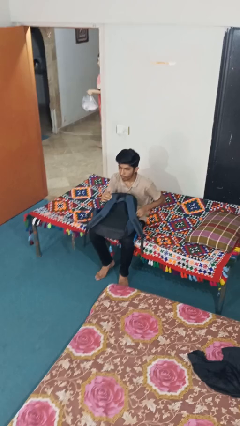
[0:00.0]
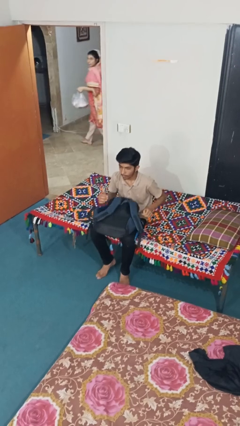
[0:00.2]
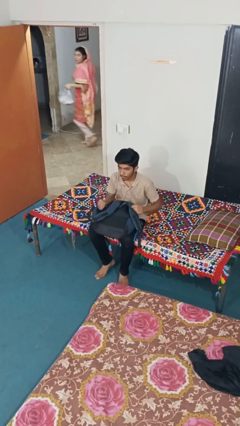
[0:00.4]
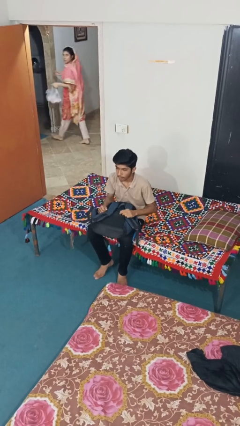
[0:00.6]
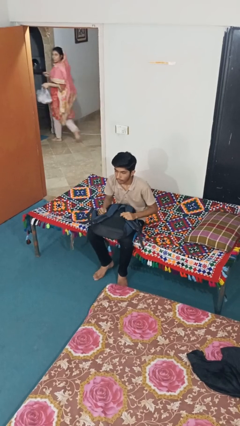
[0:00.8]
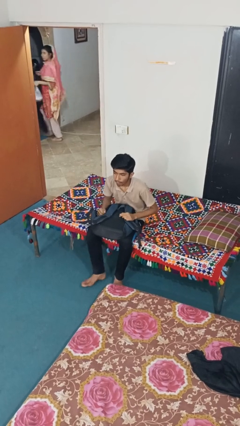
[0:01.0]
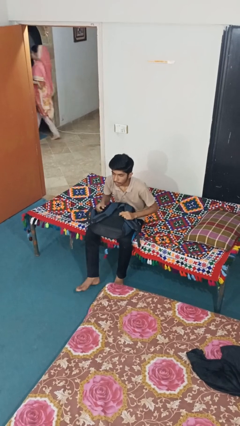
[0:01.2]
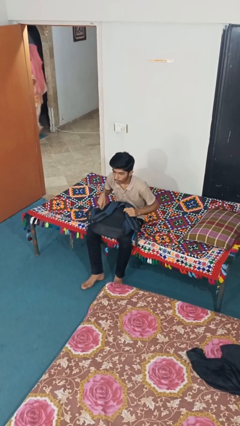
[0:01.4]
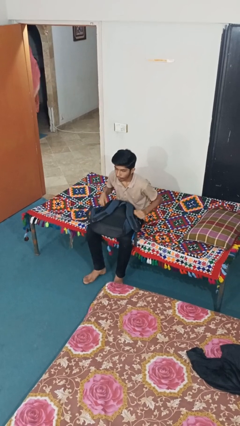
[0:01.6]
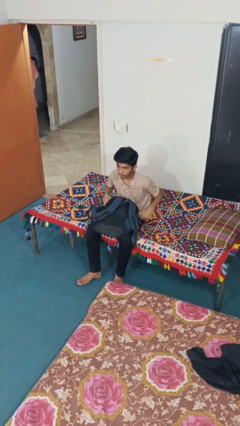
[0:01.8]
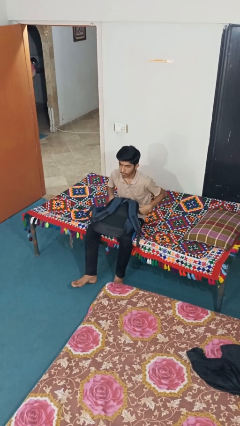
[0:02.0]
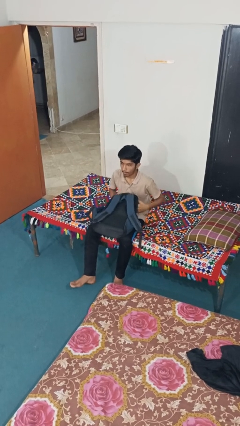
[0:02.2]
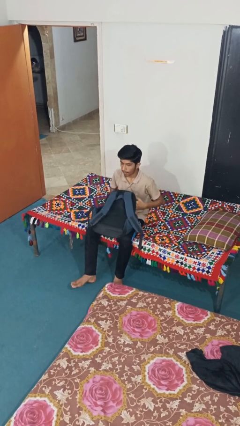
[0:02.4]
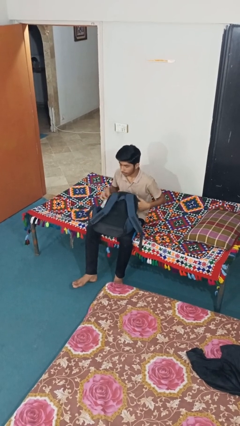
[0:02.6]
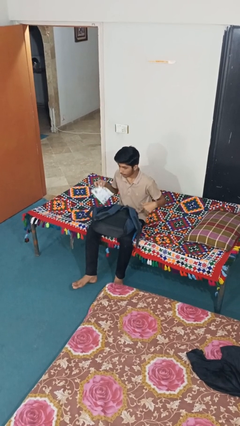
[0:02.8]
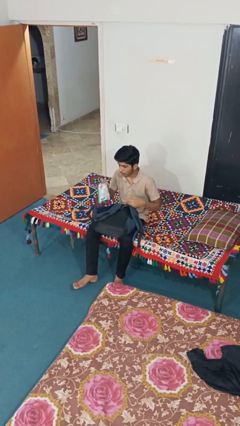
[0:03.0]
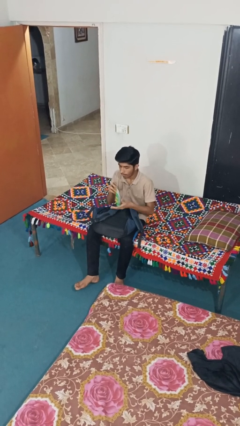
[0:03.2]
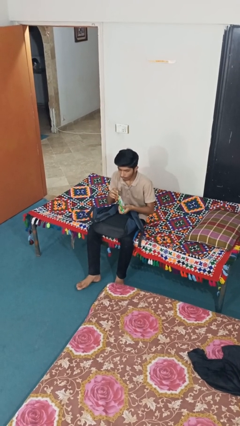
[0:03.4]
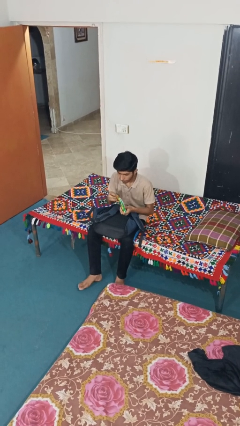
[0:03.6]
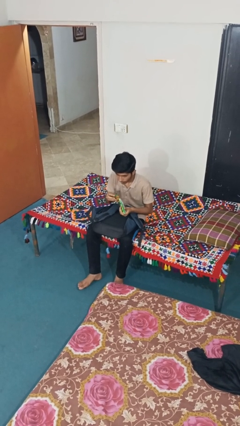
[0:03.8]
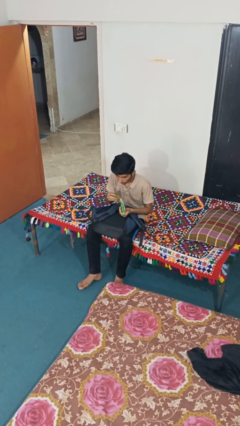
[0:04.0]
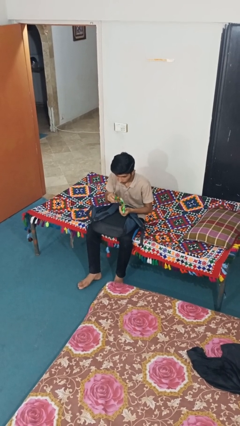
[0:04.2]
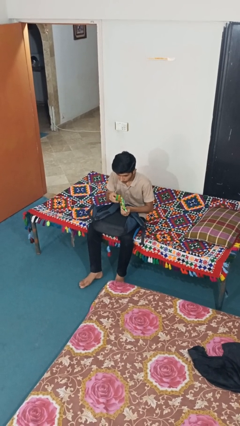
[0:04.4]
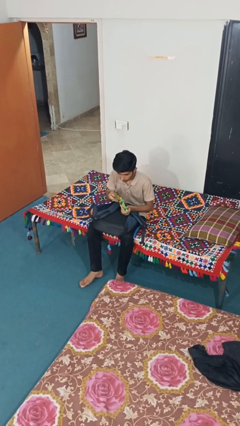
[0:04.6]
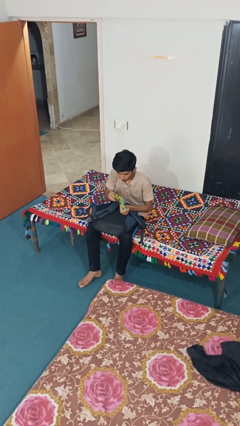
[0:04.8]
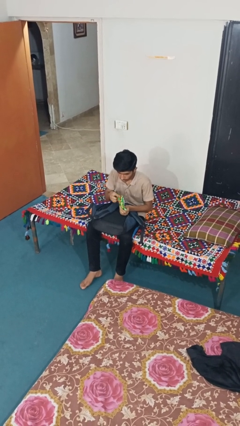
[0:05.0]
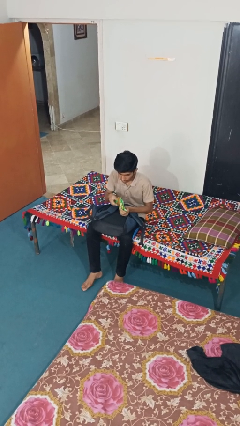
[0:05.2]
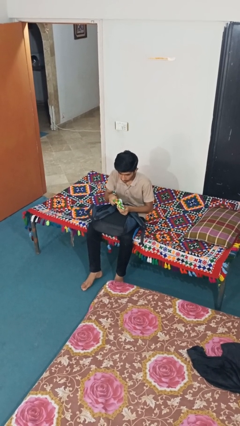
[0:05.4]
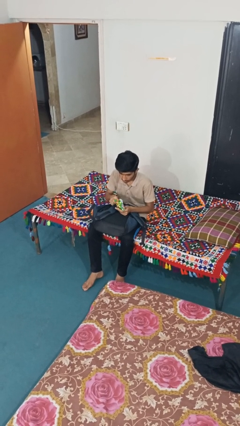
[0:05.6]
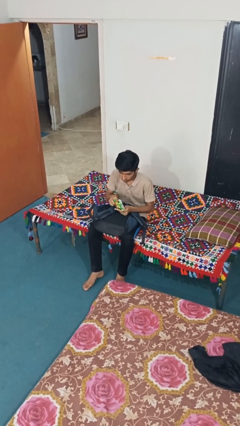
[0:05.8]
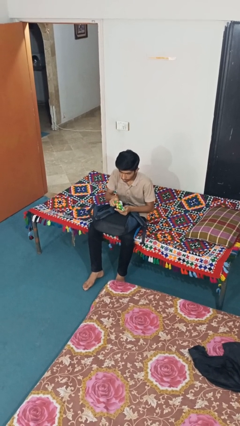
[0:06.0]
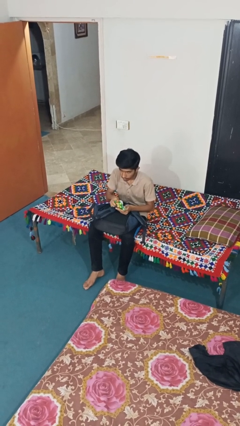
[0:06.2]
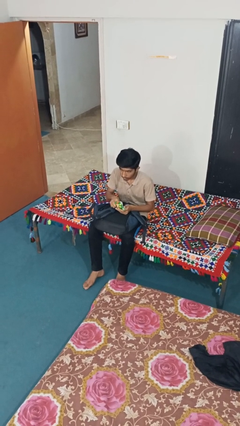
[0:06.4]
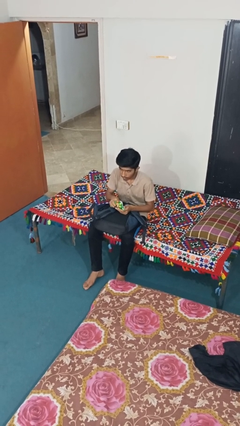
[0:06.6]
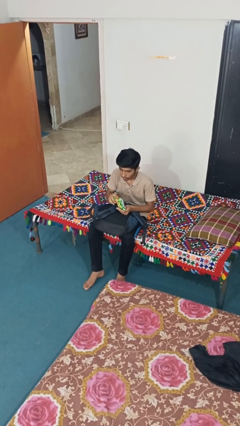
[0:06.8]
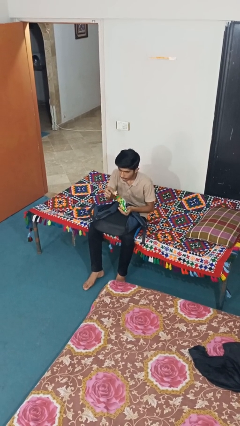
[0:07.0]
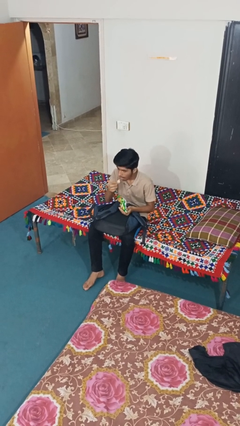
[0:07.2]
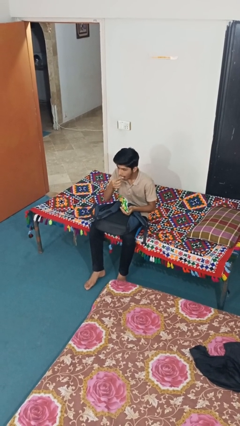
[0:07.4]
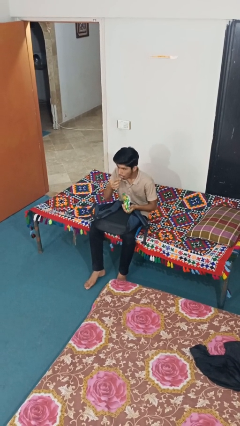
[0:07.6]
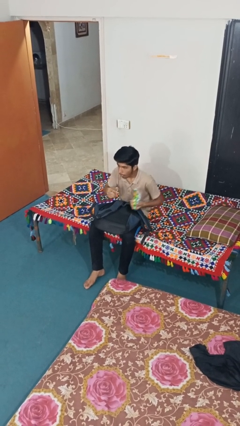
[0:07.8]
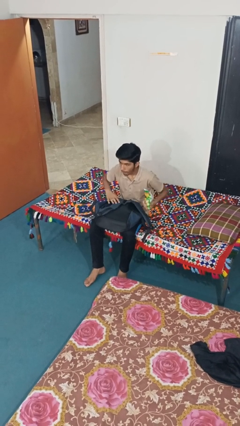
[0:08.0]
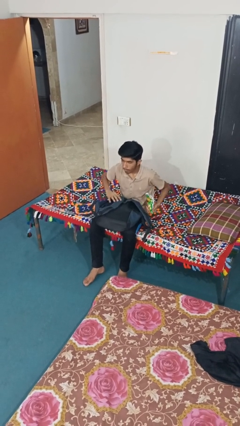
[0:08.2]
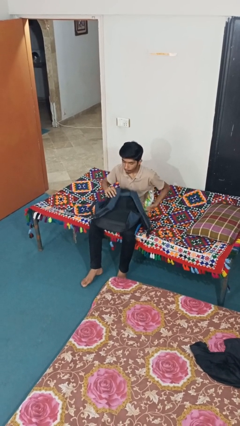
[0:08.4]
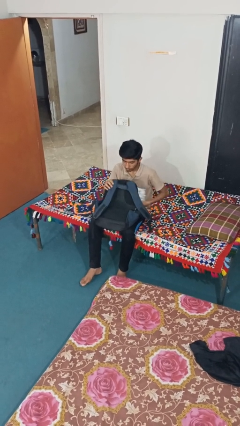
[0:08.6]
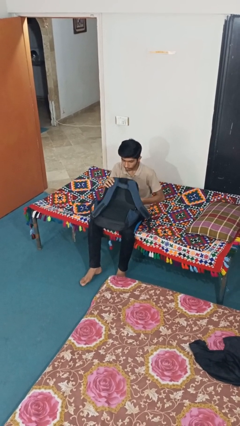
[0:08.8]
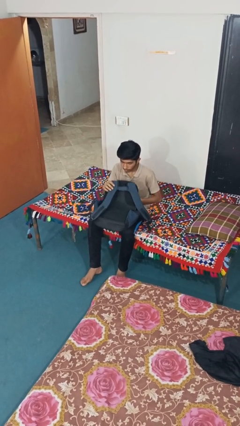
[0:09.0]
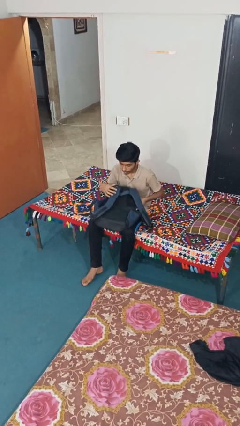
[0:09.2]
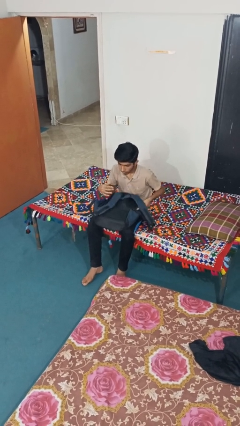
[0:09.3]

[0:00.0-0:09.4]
person eats snack from bag

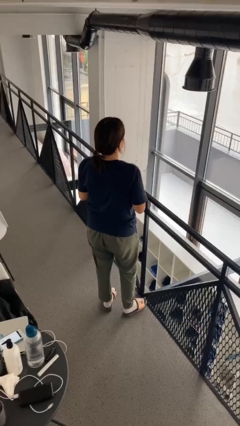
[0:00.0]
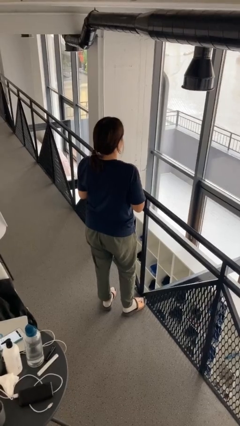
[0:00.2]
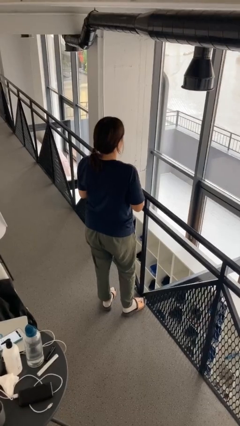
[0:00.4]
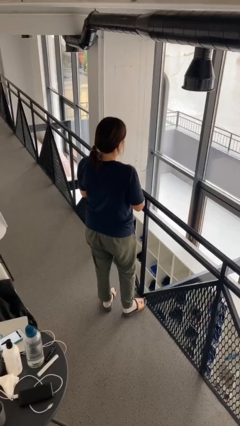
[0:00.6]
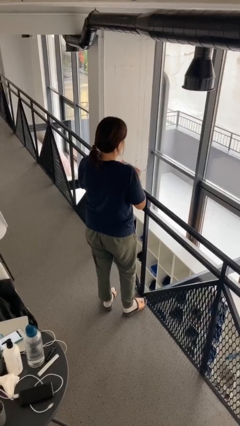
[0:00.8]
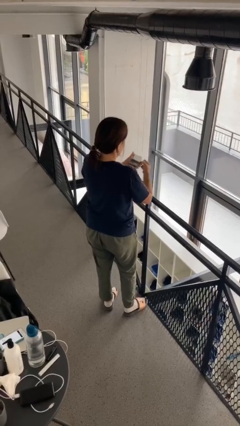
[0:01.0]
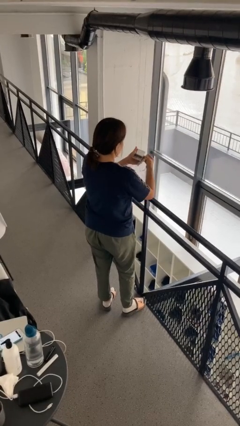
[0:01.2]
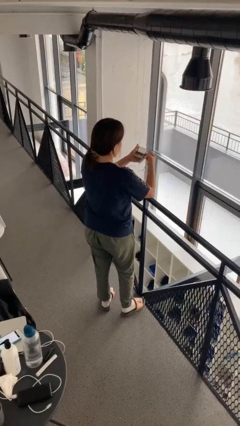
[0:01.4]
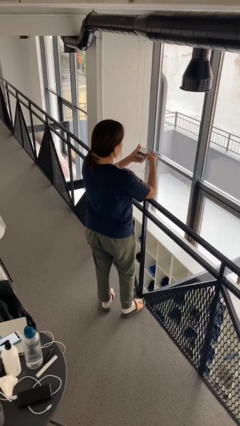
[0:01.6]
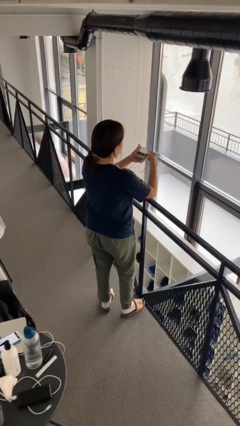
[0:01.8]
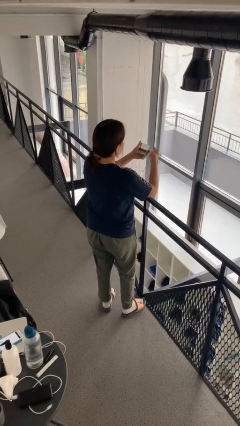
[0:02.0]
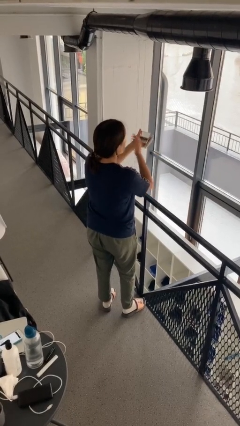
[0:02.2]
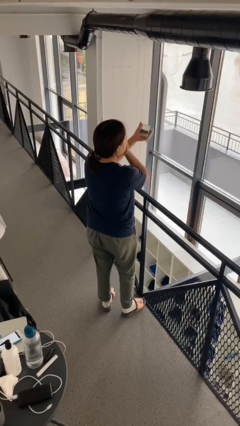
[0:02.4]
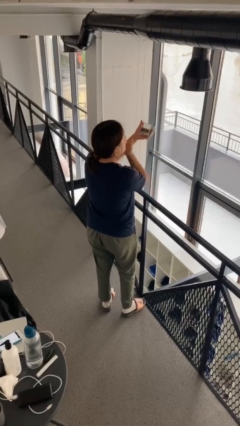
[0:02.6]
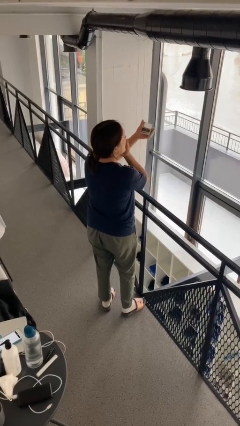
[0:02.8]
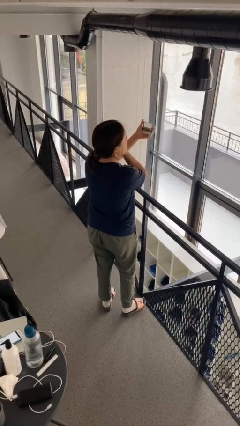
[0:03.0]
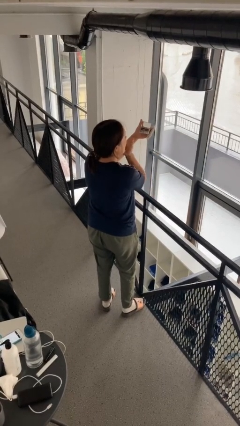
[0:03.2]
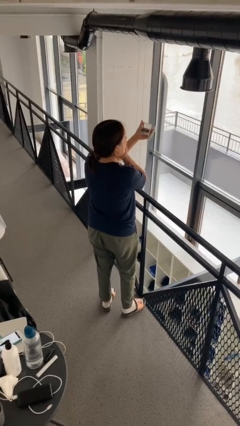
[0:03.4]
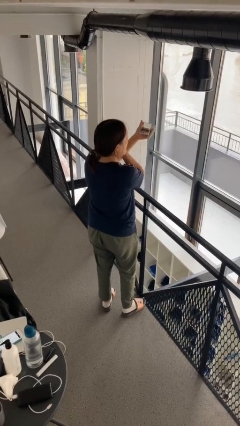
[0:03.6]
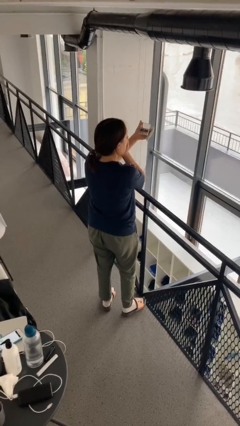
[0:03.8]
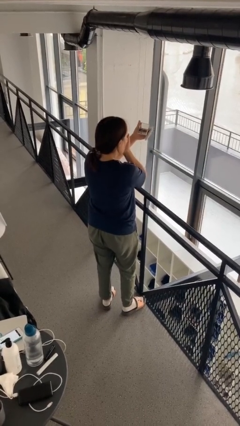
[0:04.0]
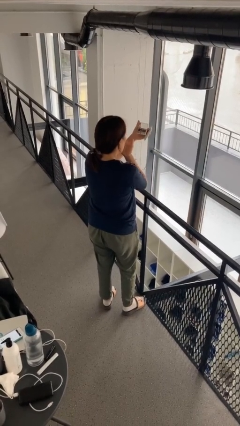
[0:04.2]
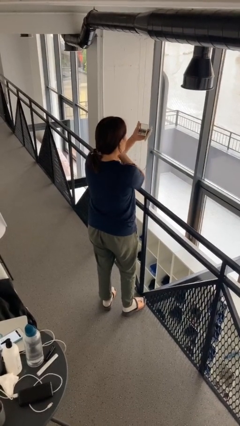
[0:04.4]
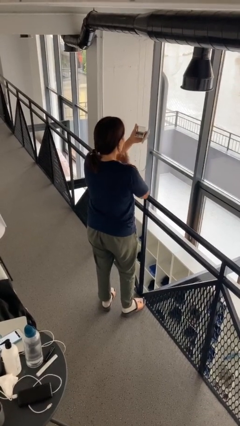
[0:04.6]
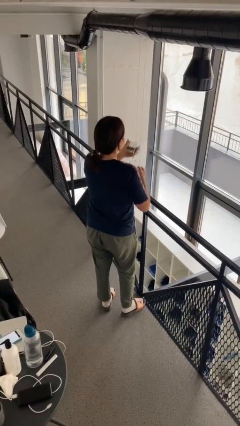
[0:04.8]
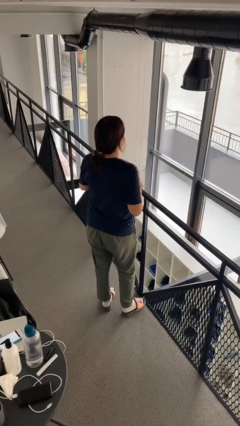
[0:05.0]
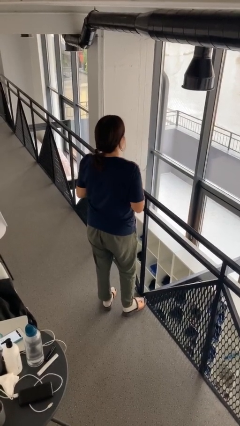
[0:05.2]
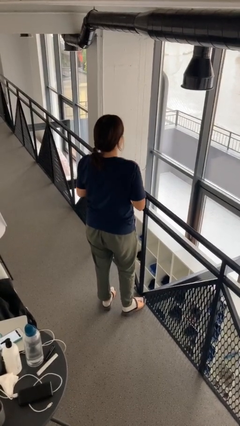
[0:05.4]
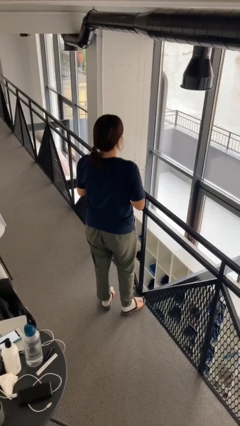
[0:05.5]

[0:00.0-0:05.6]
person applies foundation makeup

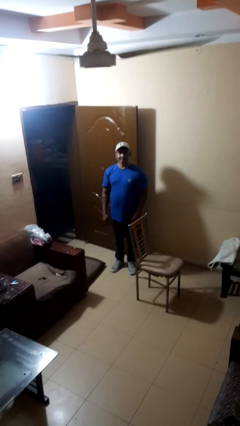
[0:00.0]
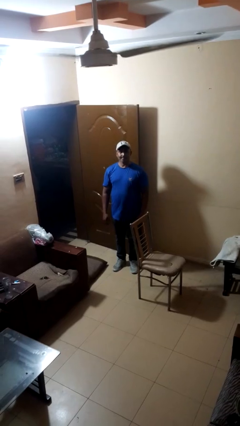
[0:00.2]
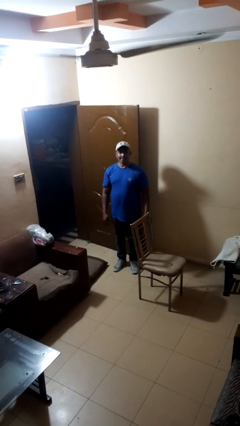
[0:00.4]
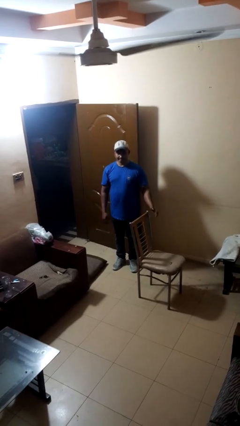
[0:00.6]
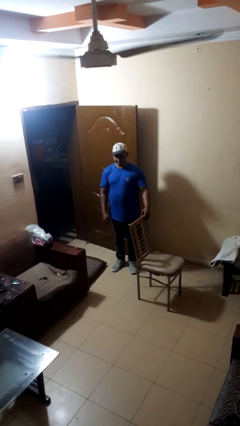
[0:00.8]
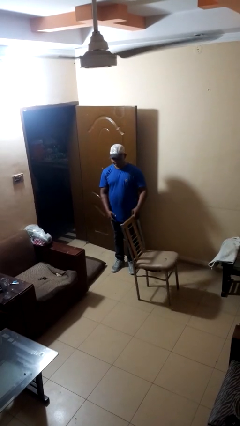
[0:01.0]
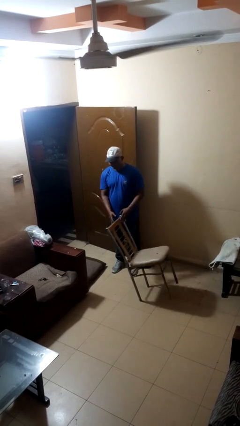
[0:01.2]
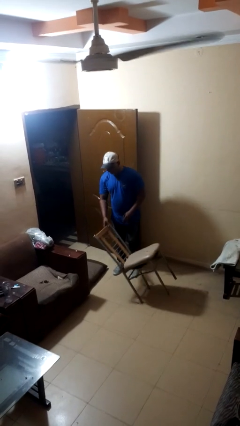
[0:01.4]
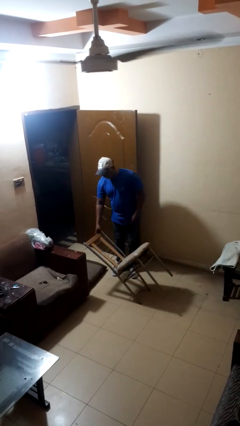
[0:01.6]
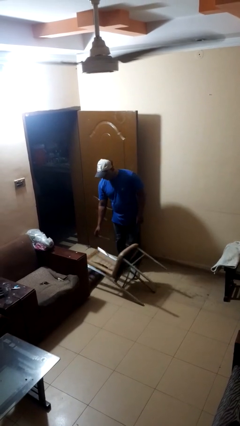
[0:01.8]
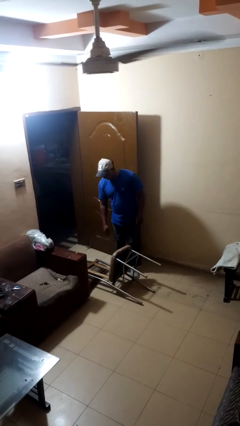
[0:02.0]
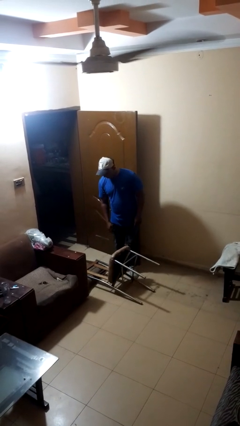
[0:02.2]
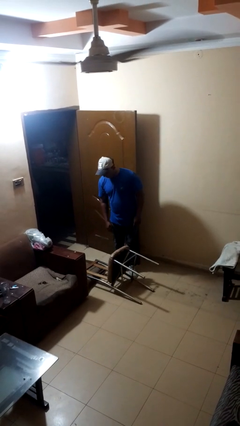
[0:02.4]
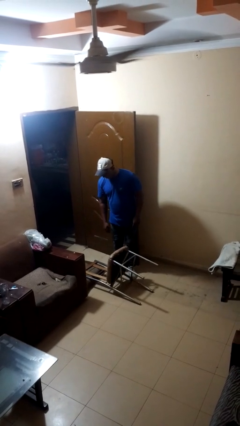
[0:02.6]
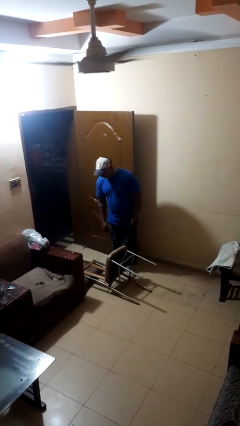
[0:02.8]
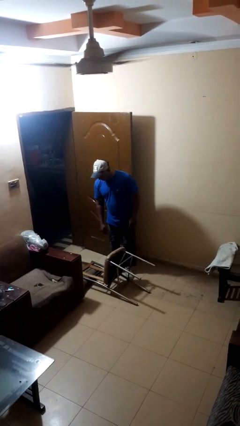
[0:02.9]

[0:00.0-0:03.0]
person knocks over furniture

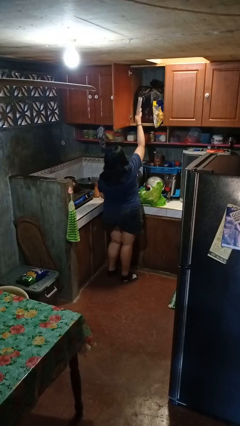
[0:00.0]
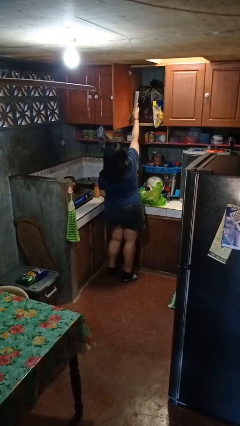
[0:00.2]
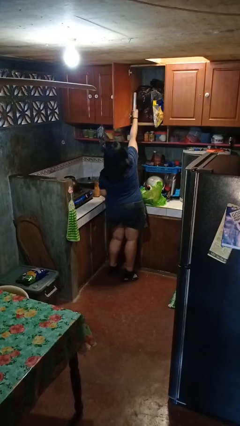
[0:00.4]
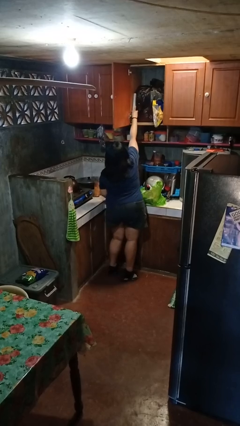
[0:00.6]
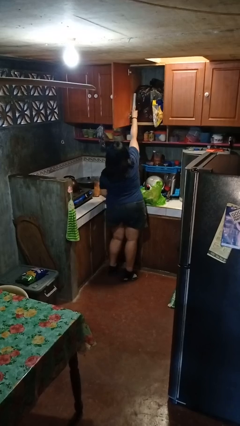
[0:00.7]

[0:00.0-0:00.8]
person loads groceries into cabinet
